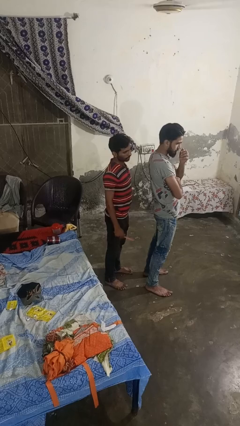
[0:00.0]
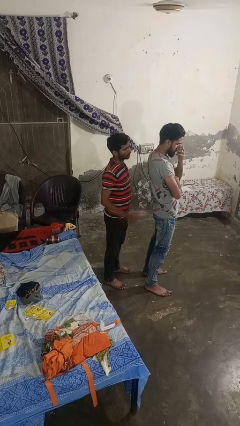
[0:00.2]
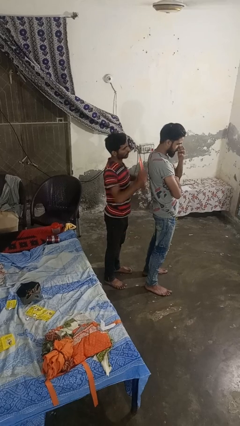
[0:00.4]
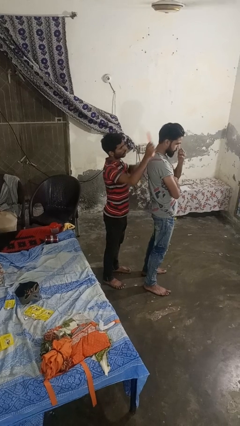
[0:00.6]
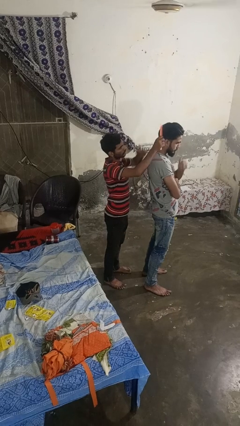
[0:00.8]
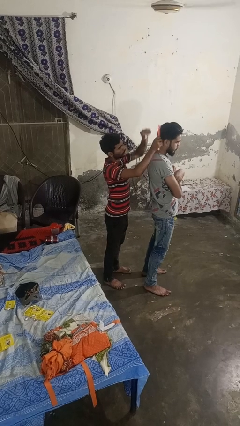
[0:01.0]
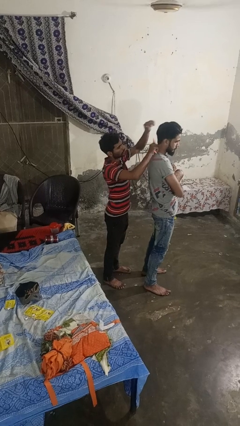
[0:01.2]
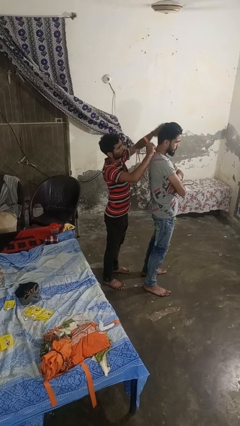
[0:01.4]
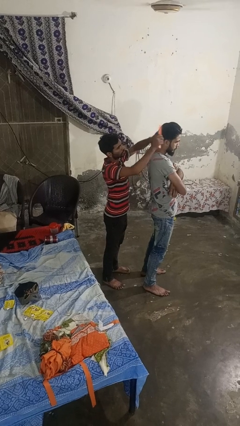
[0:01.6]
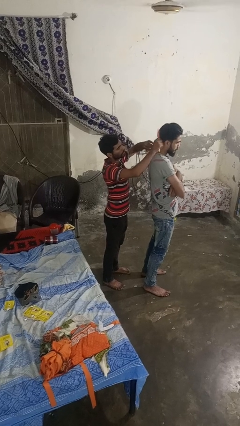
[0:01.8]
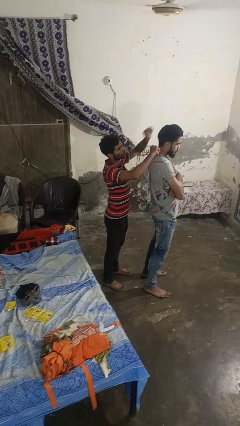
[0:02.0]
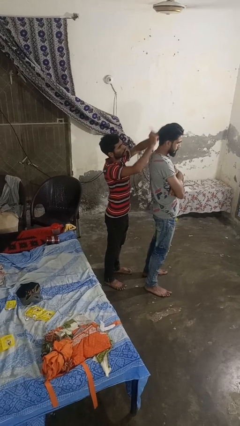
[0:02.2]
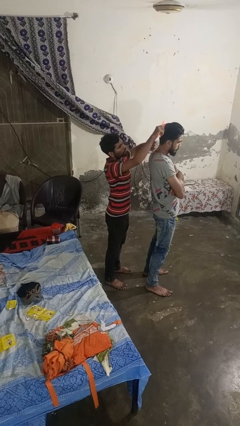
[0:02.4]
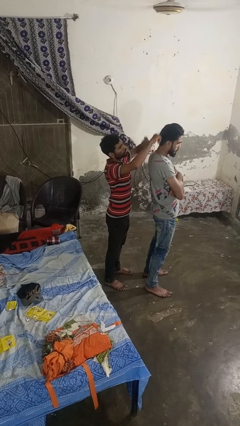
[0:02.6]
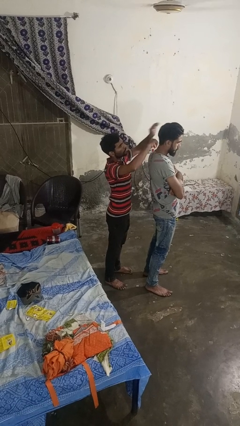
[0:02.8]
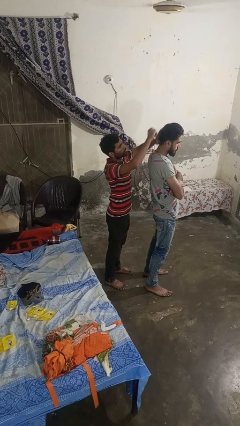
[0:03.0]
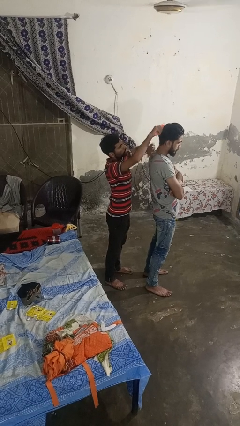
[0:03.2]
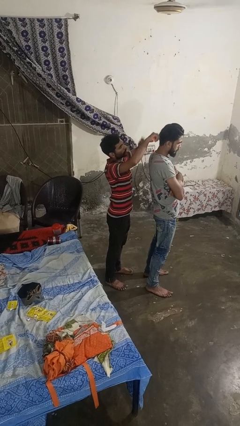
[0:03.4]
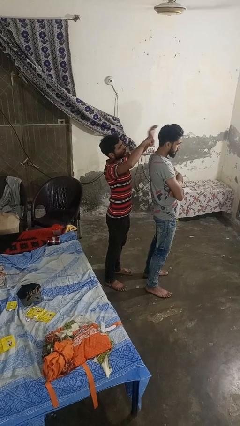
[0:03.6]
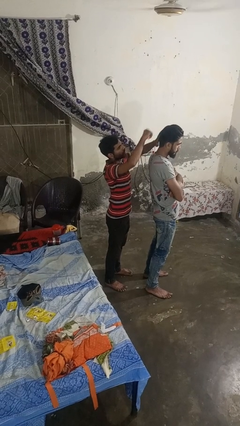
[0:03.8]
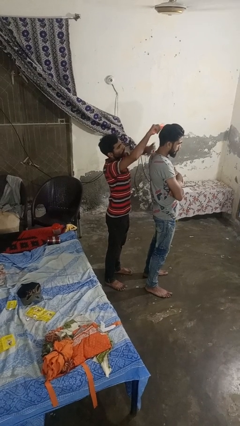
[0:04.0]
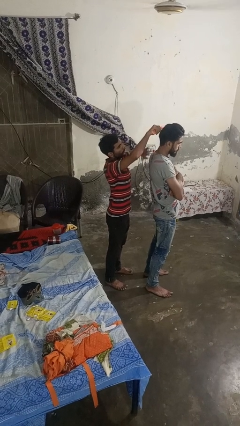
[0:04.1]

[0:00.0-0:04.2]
person brushes hair of person

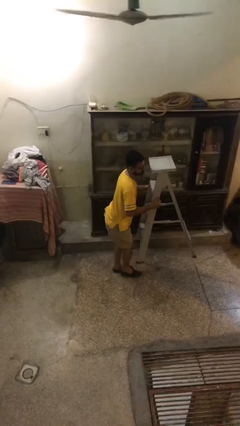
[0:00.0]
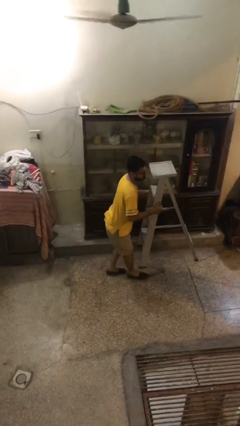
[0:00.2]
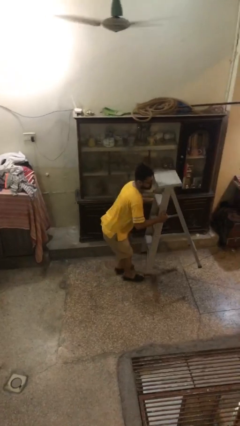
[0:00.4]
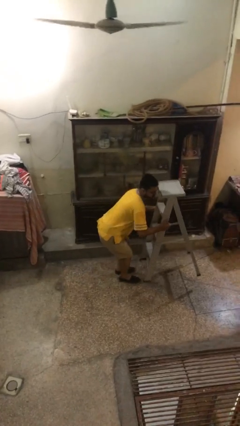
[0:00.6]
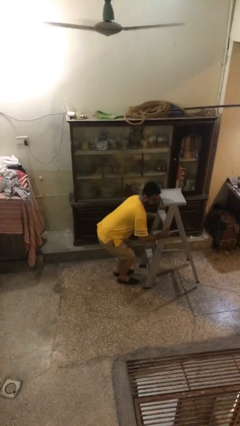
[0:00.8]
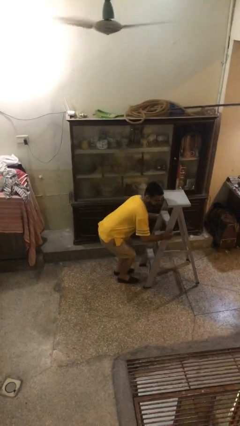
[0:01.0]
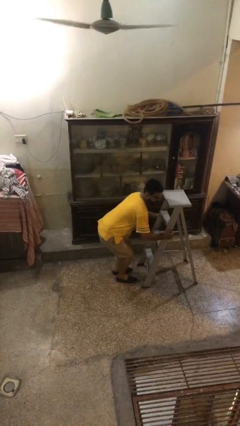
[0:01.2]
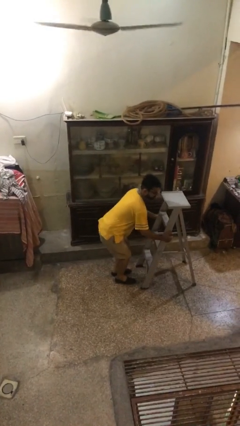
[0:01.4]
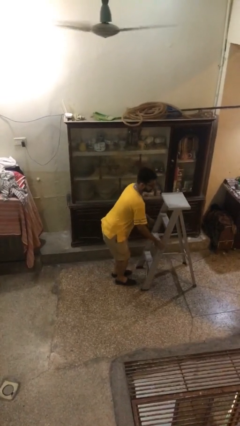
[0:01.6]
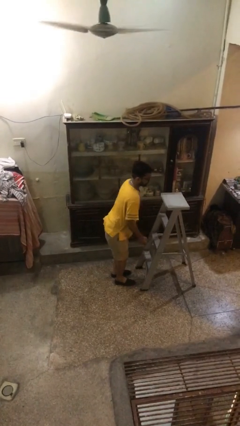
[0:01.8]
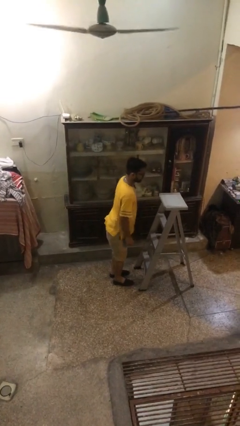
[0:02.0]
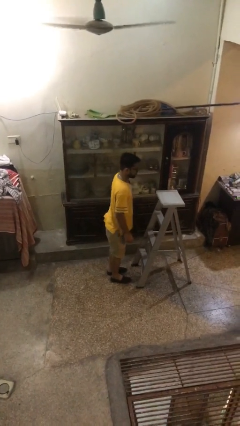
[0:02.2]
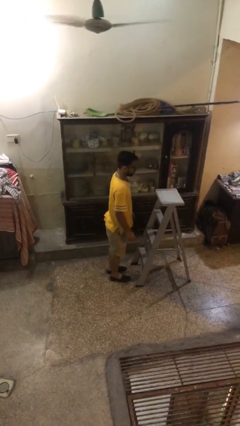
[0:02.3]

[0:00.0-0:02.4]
person puts down object on floor

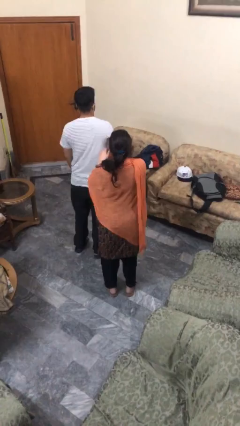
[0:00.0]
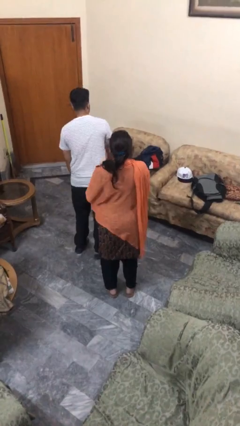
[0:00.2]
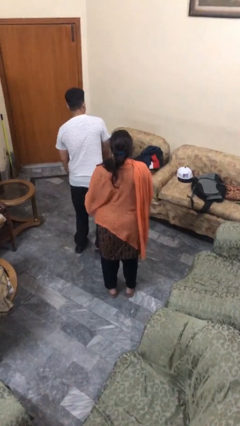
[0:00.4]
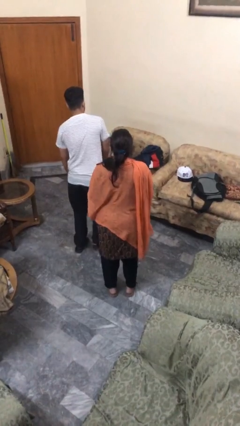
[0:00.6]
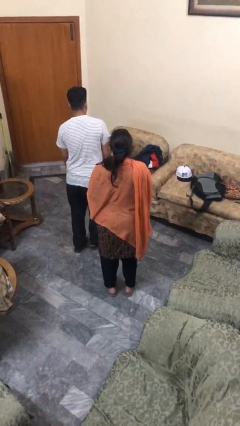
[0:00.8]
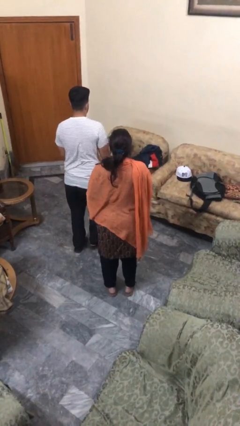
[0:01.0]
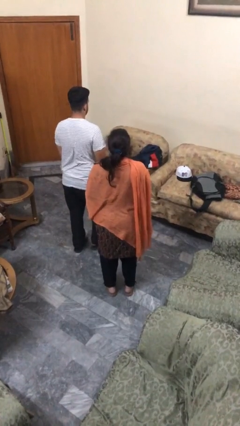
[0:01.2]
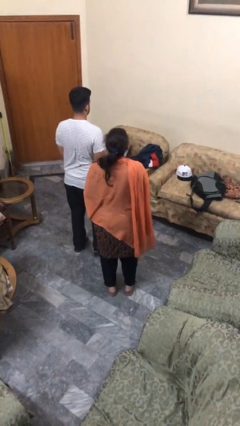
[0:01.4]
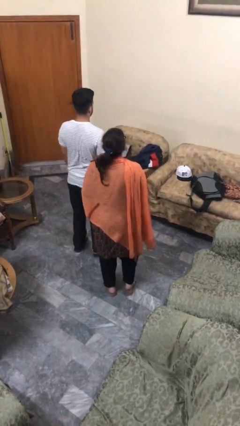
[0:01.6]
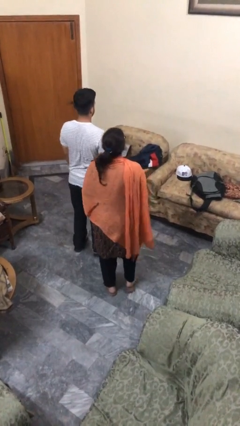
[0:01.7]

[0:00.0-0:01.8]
person shoves person

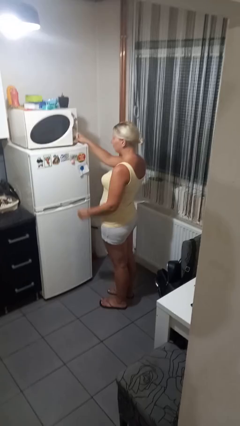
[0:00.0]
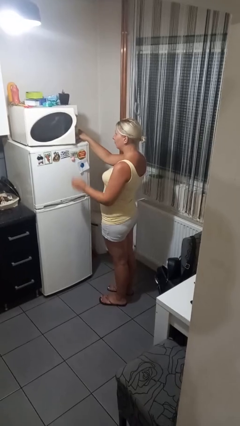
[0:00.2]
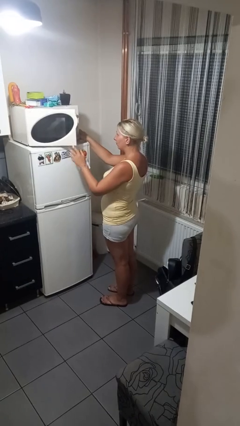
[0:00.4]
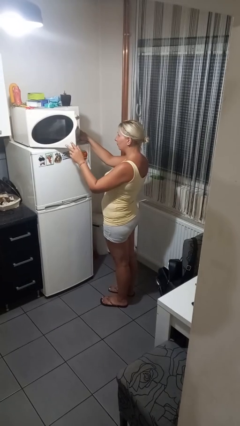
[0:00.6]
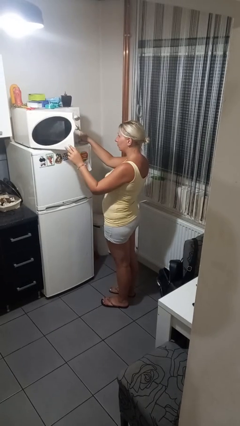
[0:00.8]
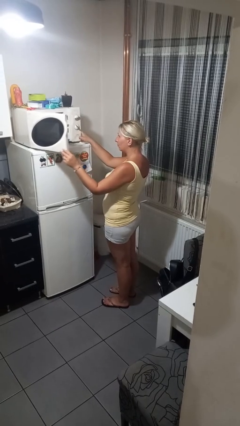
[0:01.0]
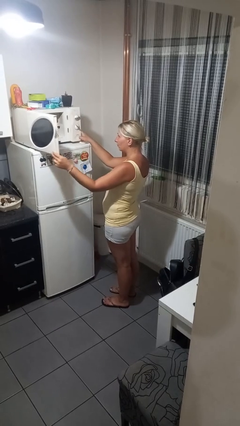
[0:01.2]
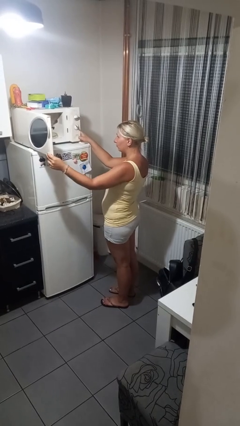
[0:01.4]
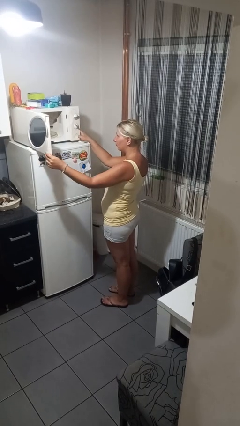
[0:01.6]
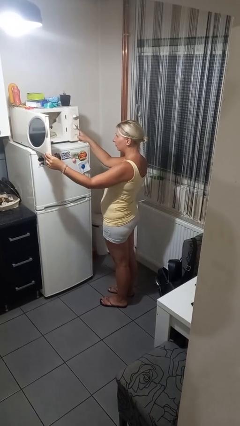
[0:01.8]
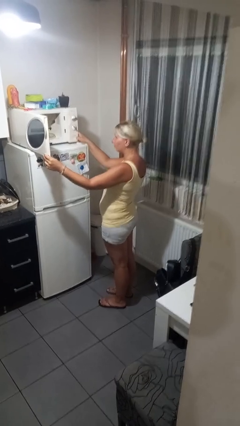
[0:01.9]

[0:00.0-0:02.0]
person opens microwave

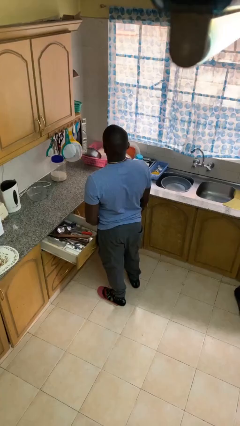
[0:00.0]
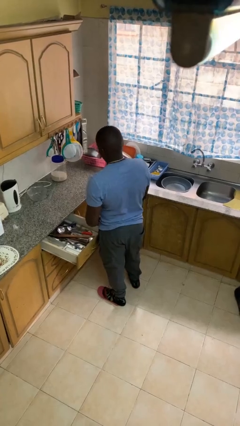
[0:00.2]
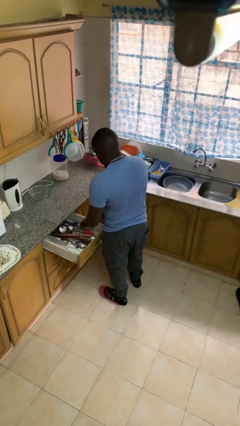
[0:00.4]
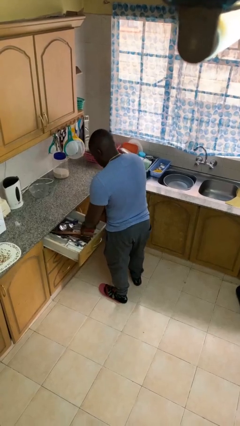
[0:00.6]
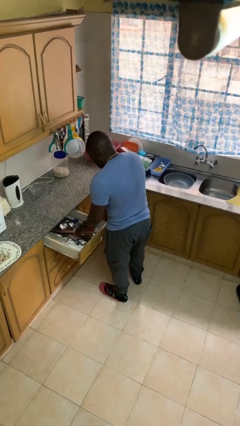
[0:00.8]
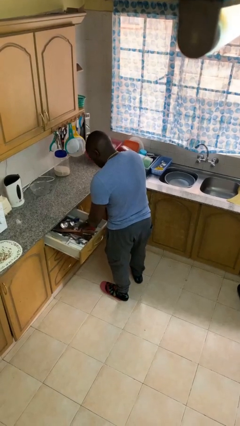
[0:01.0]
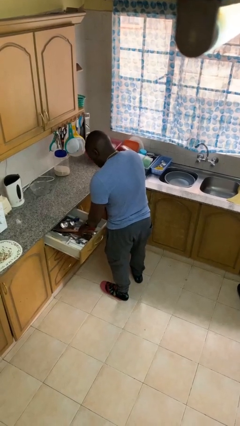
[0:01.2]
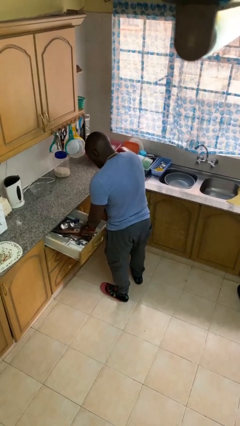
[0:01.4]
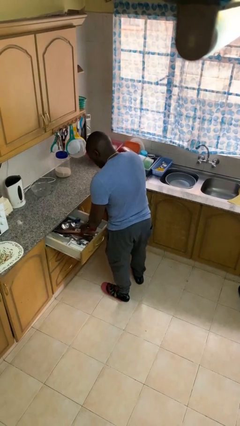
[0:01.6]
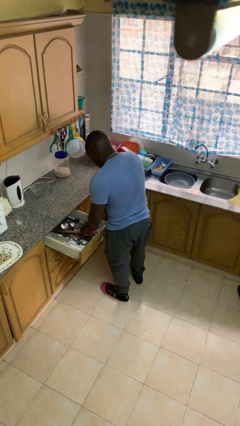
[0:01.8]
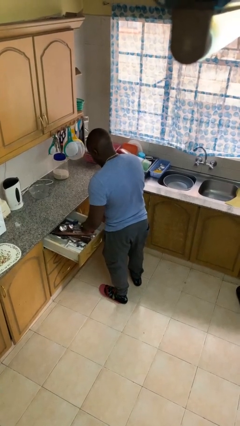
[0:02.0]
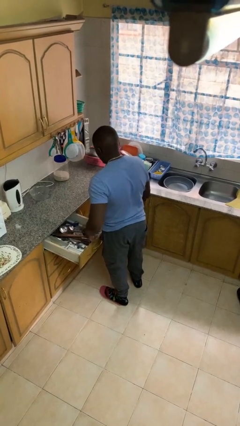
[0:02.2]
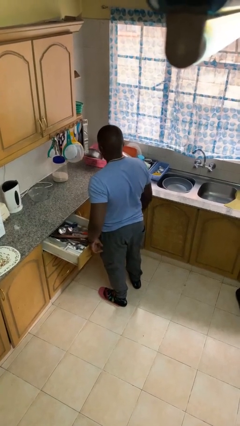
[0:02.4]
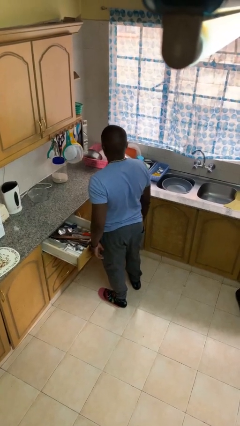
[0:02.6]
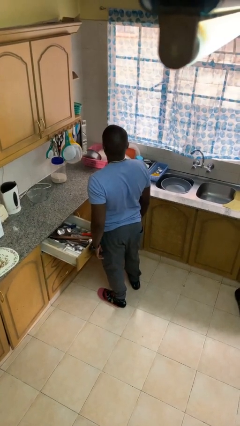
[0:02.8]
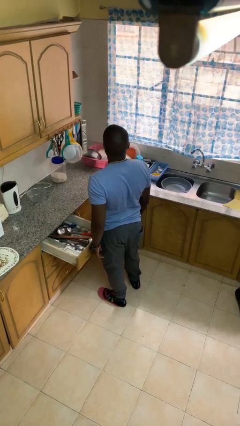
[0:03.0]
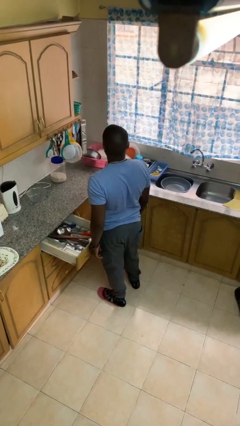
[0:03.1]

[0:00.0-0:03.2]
person searches in kitchen drawer

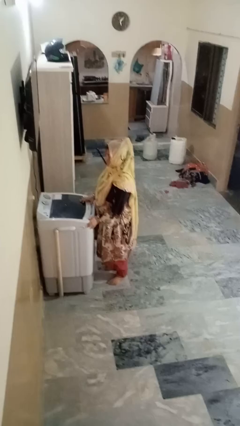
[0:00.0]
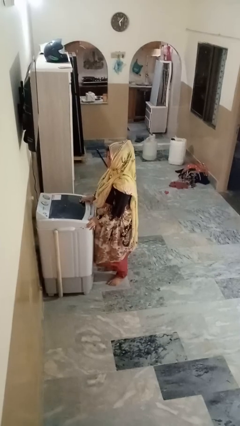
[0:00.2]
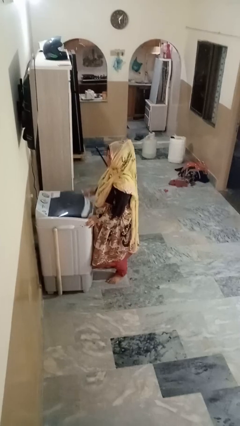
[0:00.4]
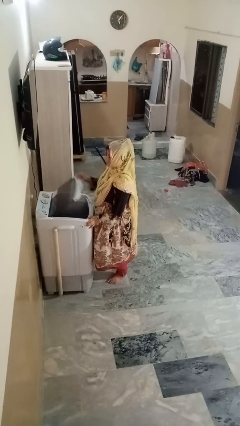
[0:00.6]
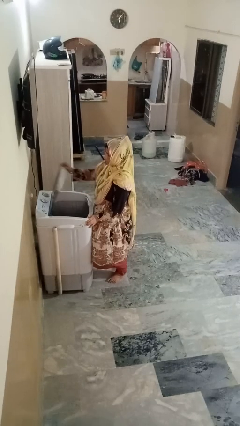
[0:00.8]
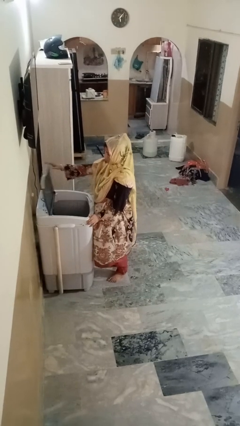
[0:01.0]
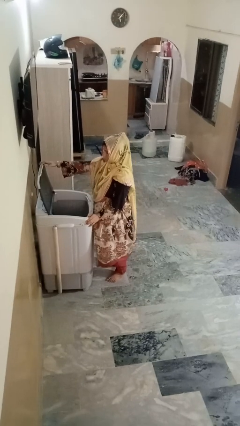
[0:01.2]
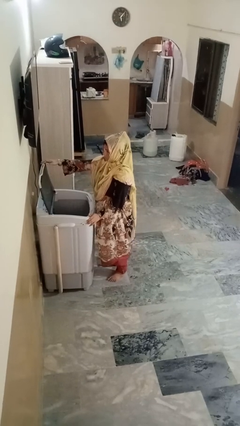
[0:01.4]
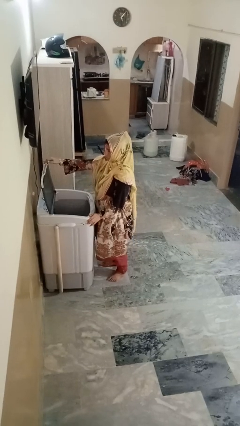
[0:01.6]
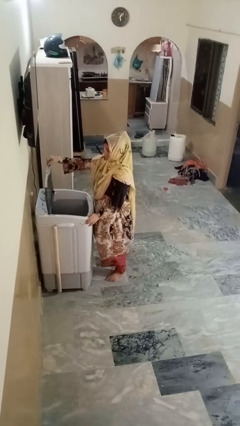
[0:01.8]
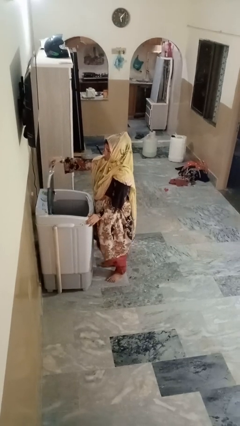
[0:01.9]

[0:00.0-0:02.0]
person opens clothes washer

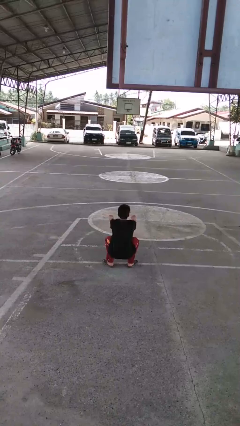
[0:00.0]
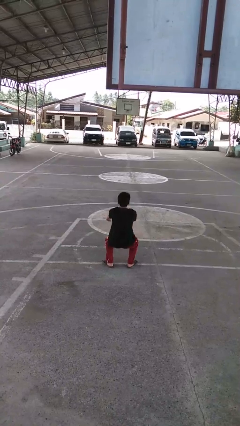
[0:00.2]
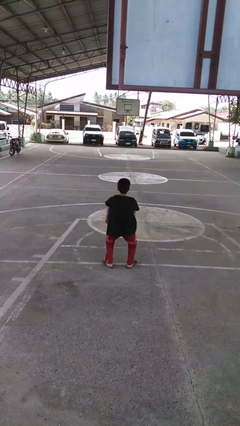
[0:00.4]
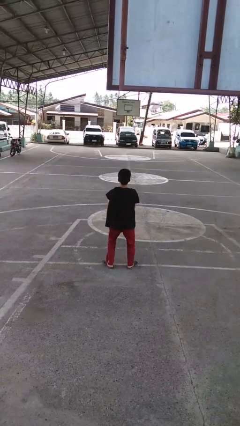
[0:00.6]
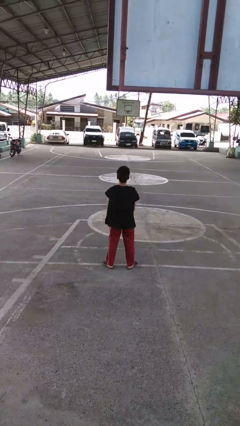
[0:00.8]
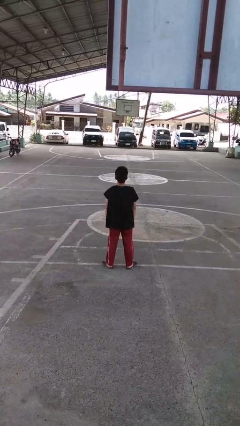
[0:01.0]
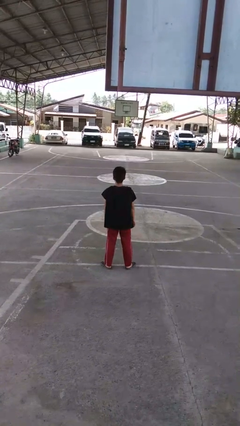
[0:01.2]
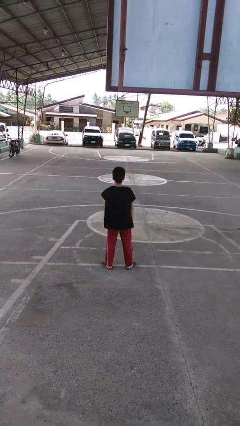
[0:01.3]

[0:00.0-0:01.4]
person stands up
